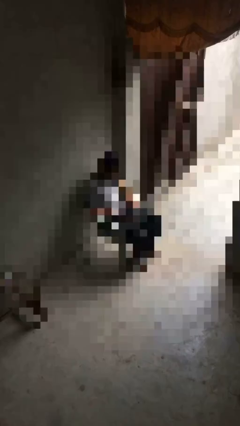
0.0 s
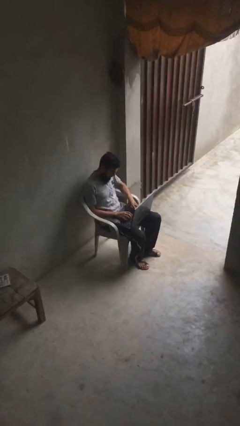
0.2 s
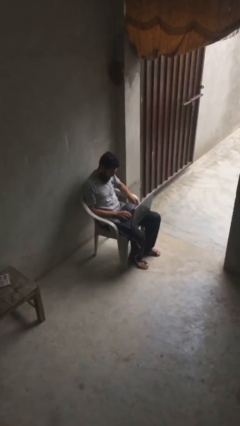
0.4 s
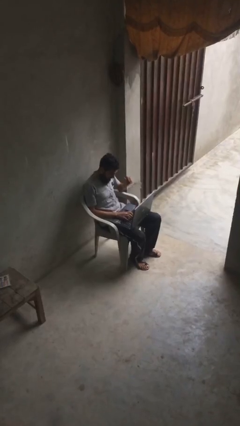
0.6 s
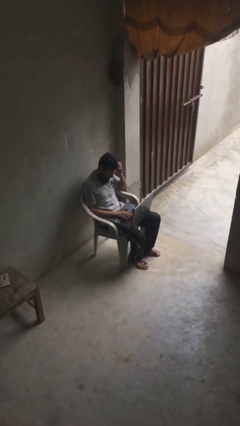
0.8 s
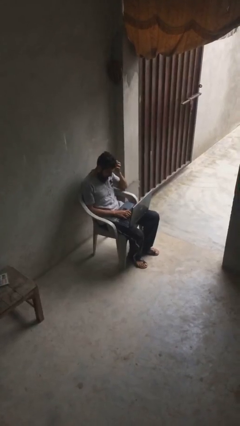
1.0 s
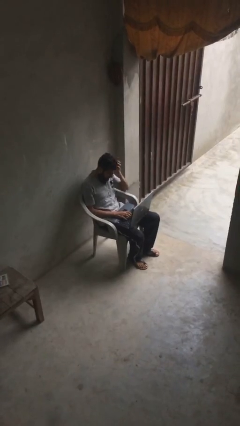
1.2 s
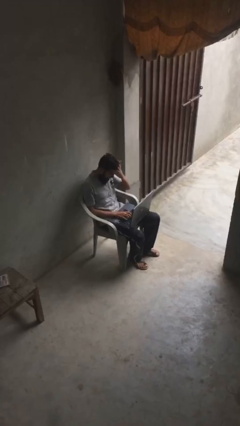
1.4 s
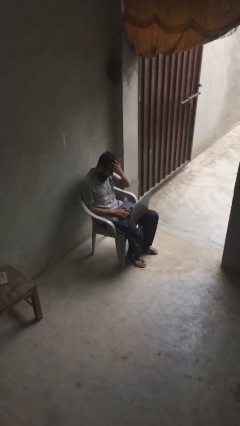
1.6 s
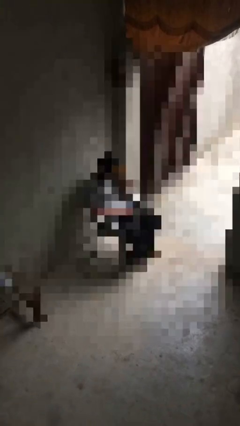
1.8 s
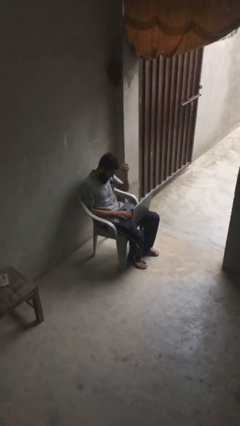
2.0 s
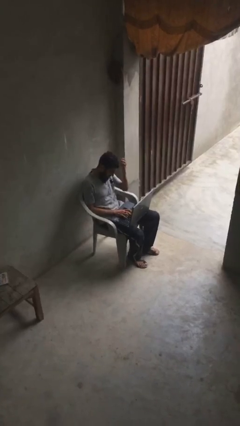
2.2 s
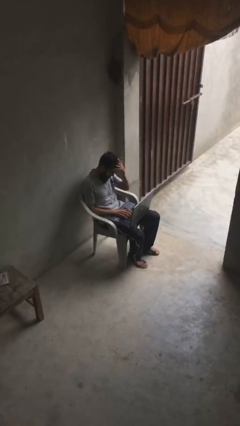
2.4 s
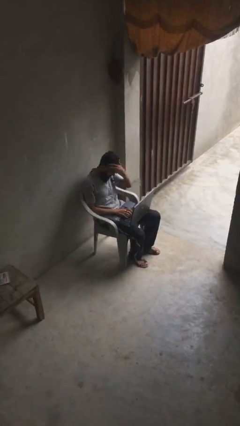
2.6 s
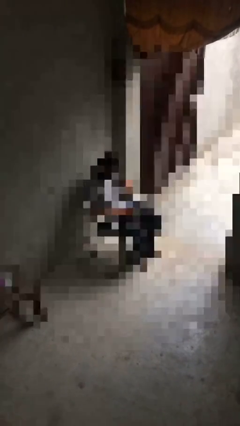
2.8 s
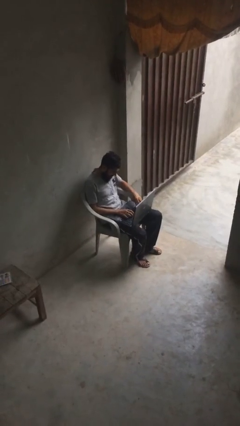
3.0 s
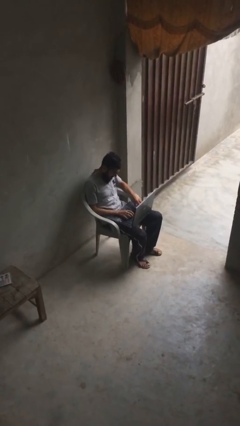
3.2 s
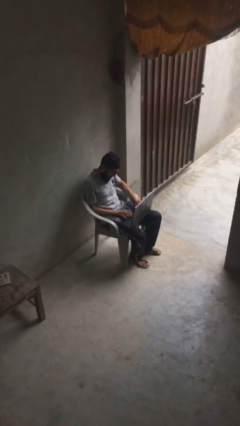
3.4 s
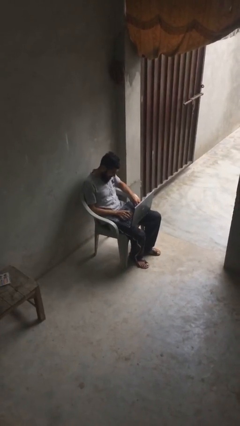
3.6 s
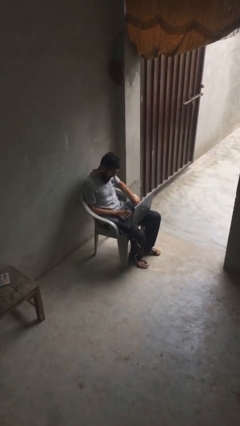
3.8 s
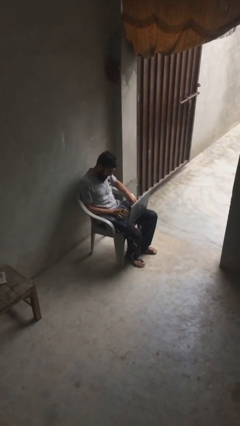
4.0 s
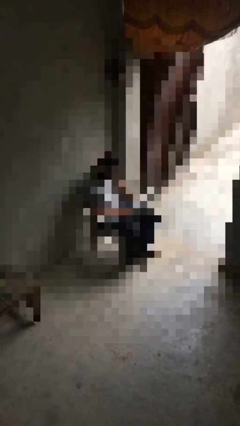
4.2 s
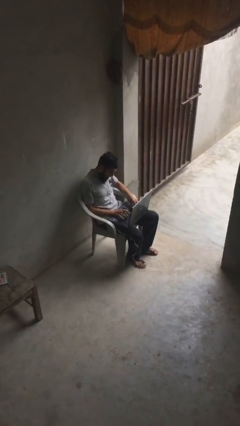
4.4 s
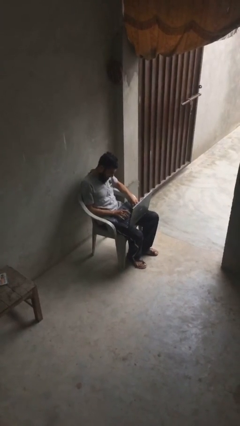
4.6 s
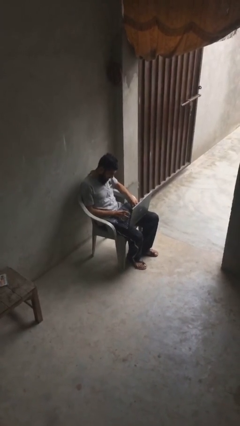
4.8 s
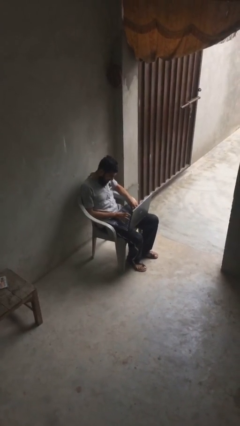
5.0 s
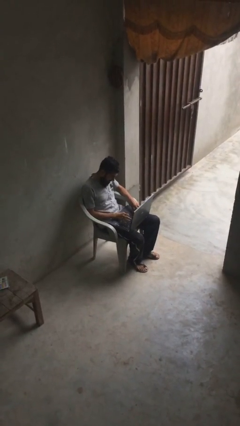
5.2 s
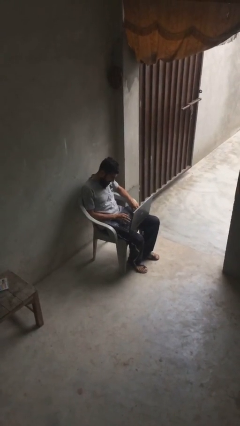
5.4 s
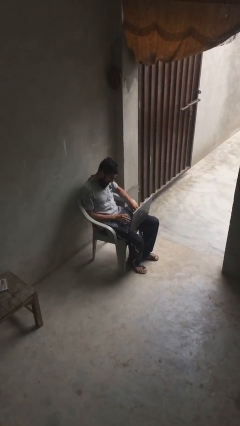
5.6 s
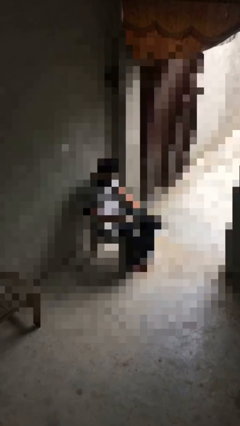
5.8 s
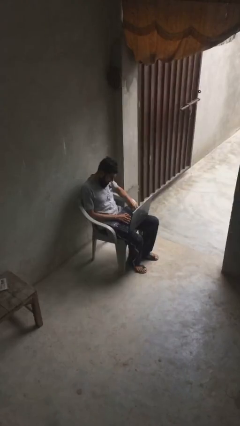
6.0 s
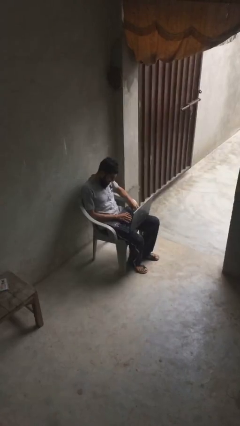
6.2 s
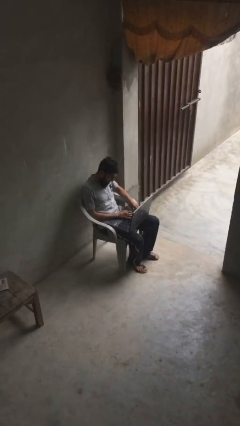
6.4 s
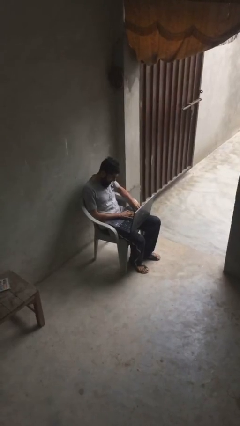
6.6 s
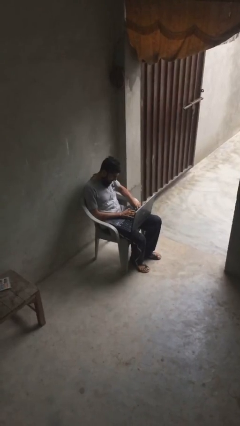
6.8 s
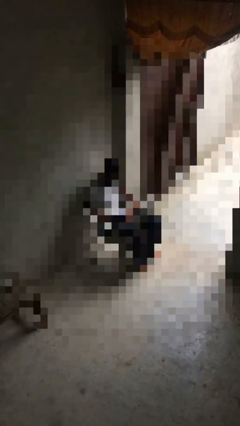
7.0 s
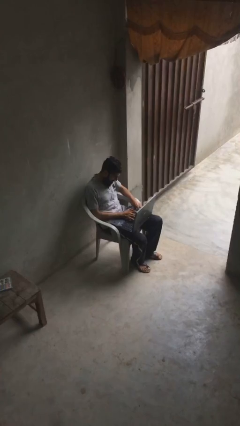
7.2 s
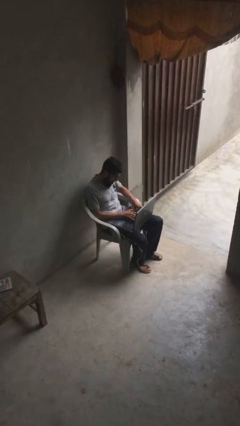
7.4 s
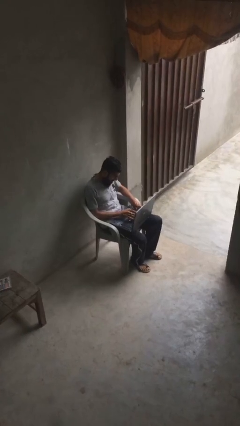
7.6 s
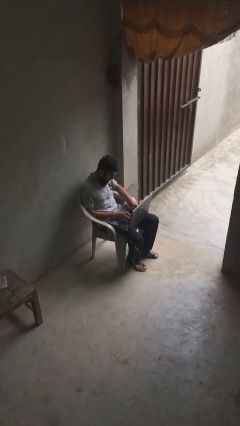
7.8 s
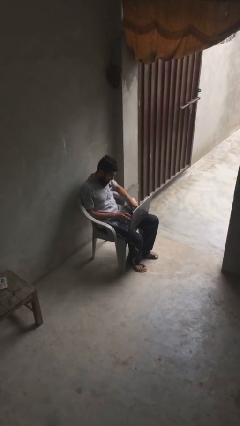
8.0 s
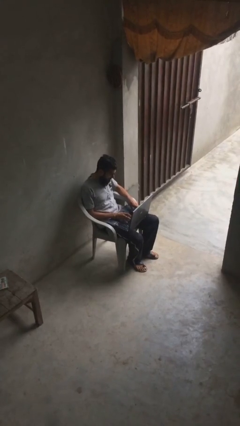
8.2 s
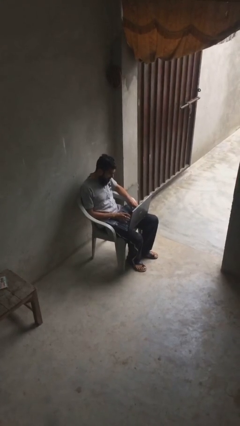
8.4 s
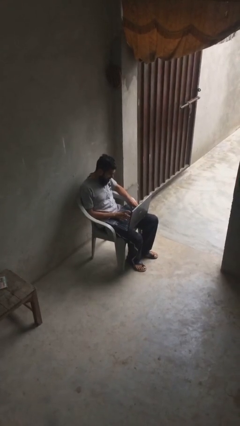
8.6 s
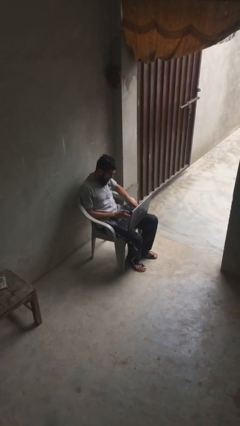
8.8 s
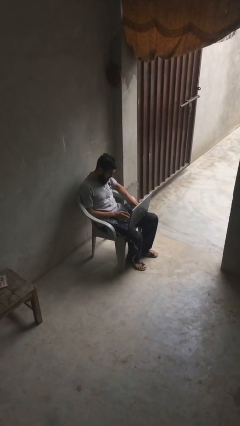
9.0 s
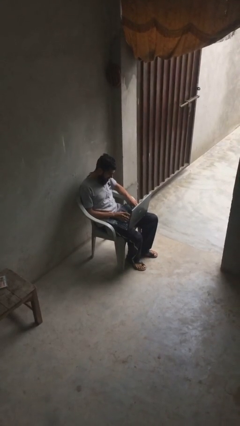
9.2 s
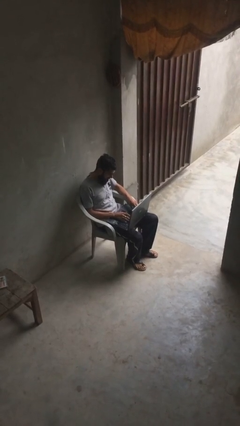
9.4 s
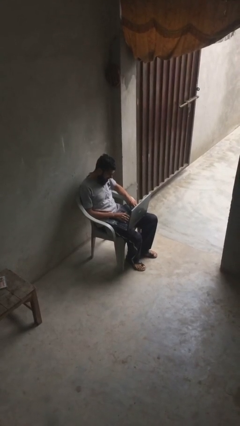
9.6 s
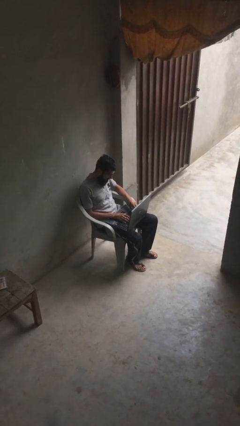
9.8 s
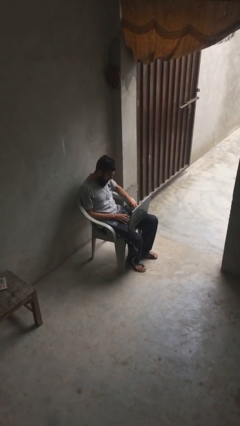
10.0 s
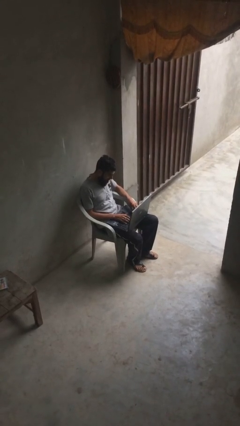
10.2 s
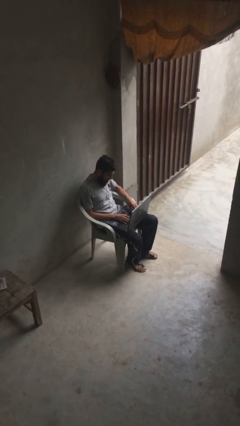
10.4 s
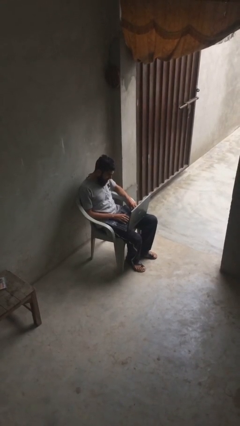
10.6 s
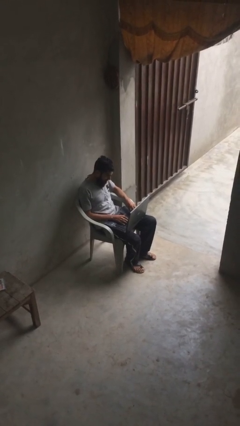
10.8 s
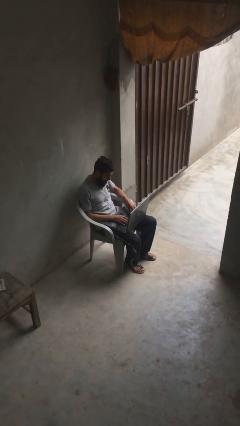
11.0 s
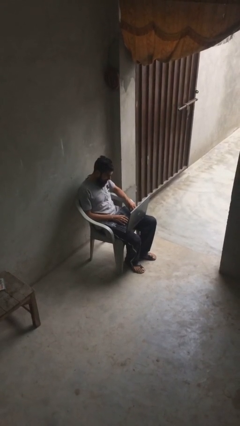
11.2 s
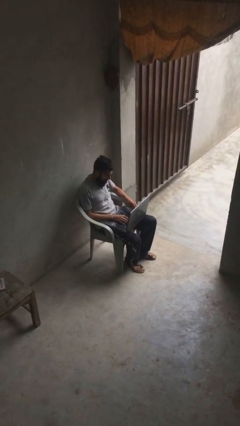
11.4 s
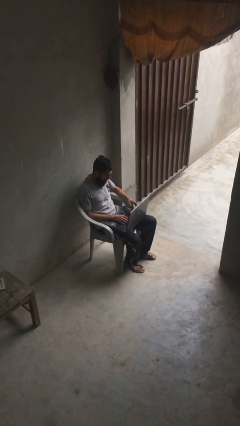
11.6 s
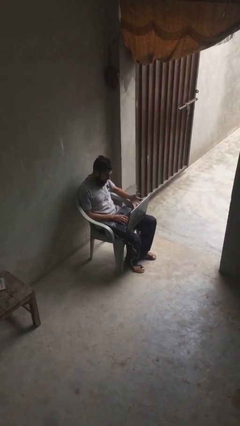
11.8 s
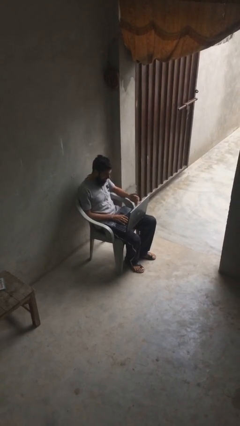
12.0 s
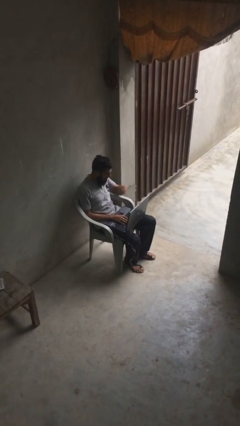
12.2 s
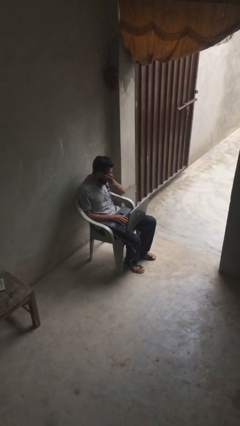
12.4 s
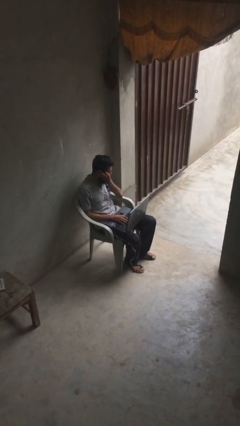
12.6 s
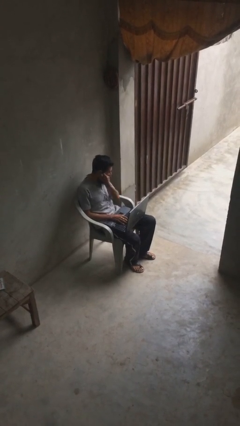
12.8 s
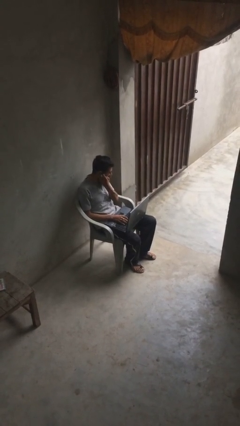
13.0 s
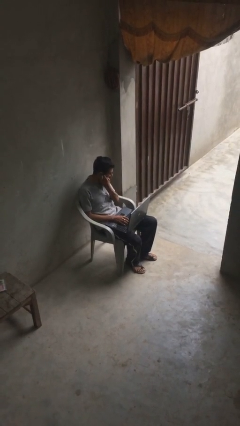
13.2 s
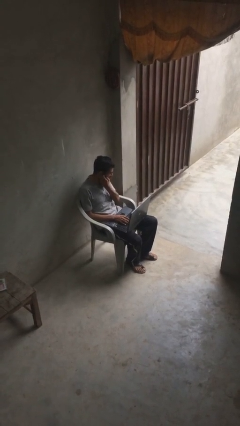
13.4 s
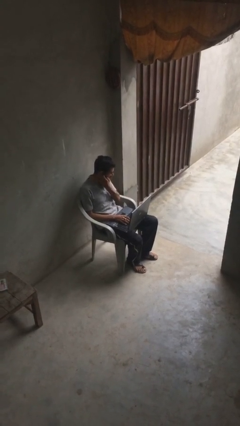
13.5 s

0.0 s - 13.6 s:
person interacts with laptop

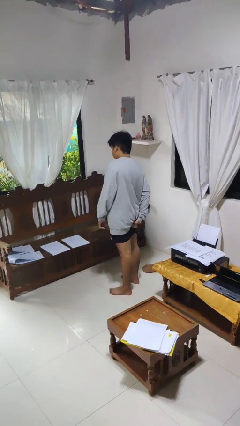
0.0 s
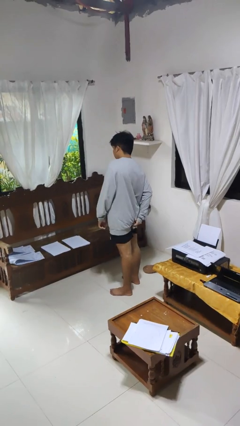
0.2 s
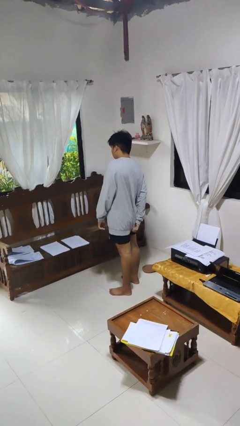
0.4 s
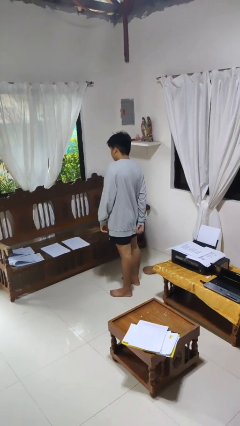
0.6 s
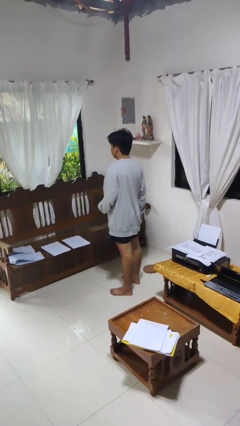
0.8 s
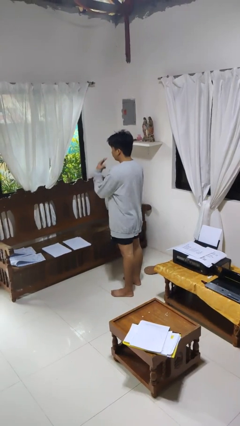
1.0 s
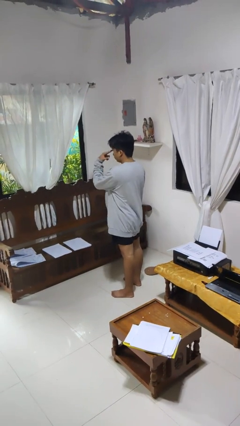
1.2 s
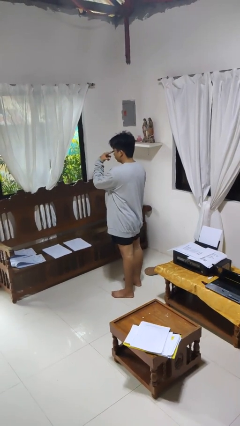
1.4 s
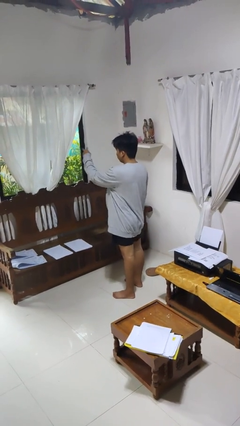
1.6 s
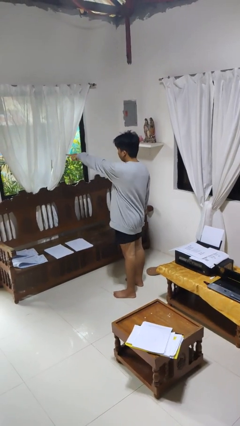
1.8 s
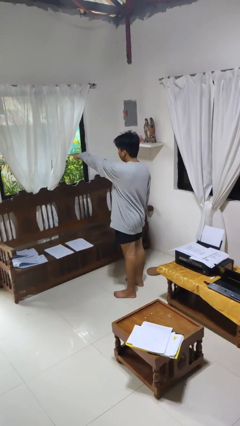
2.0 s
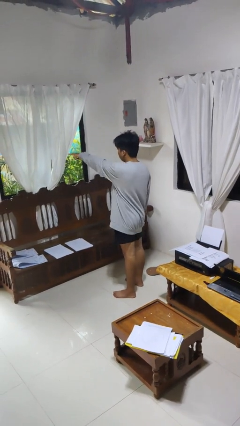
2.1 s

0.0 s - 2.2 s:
person gestures watch closely

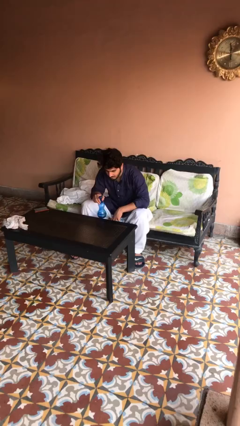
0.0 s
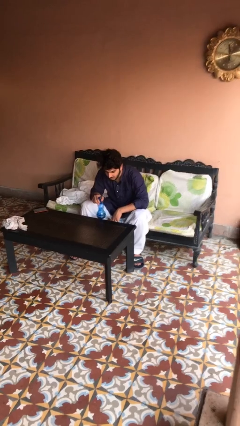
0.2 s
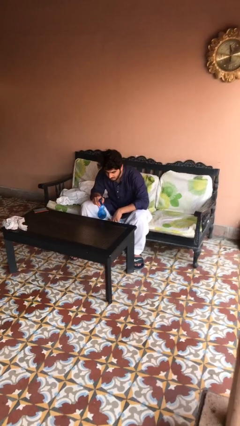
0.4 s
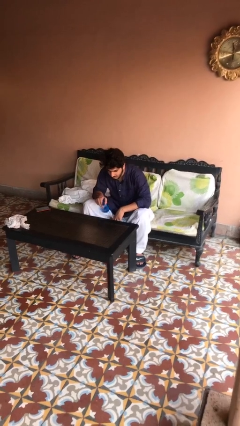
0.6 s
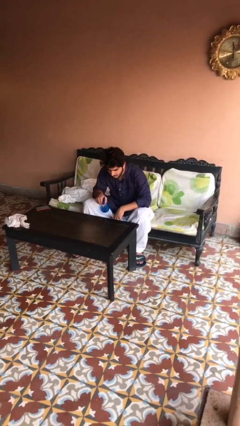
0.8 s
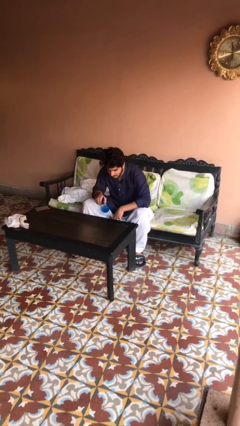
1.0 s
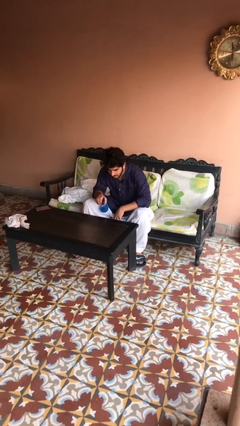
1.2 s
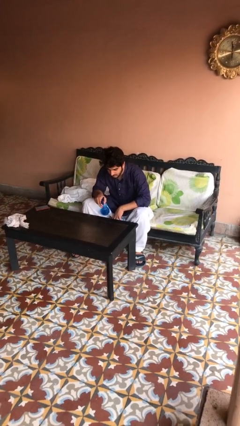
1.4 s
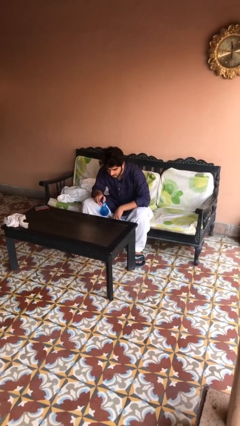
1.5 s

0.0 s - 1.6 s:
person sprays from bottle

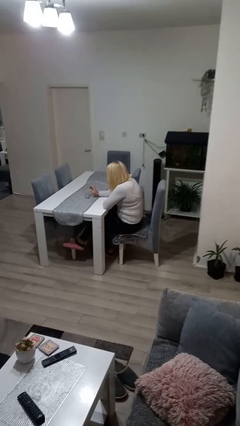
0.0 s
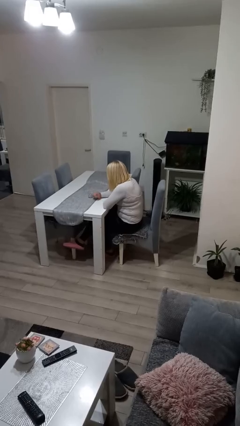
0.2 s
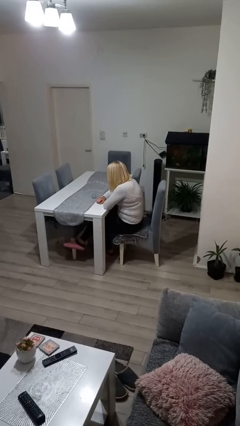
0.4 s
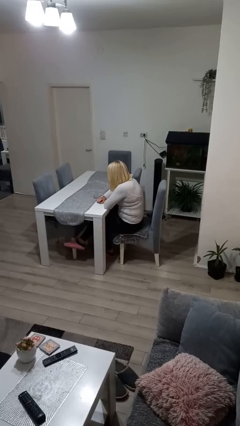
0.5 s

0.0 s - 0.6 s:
person knocks over glass
